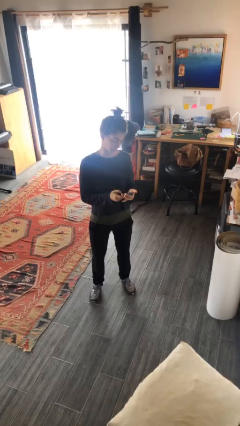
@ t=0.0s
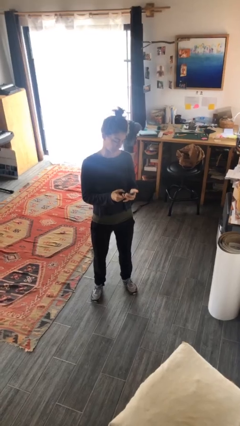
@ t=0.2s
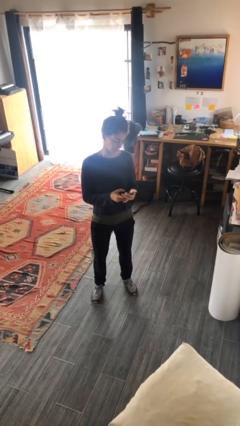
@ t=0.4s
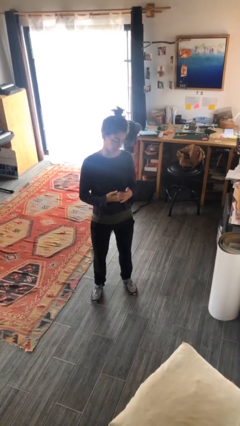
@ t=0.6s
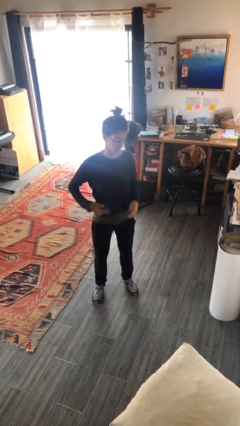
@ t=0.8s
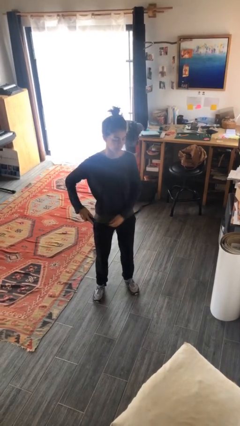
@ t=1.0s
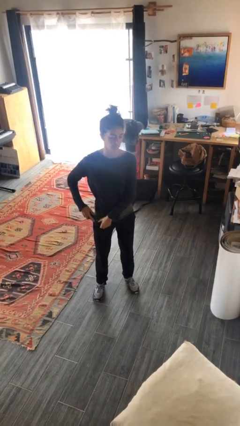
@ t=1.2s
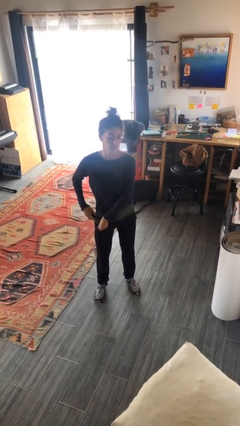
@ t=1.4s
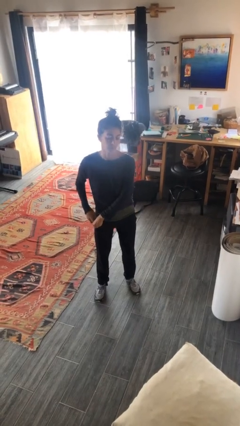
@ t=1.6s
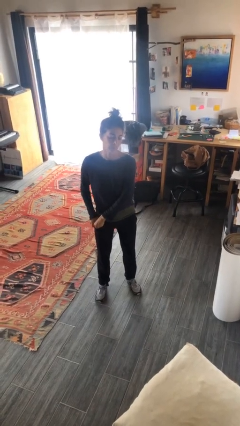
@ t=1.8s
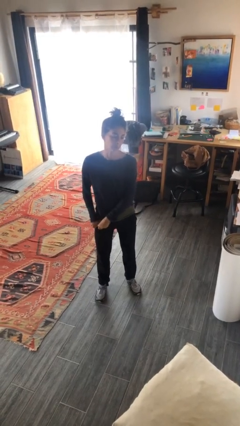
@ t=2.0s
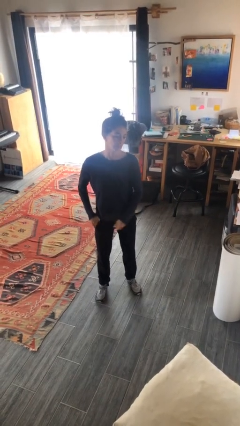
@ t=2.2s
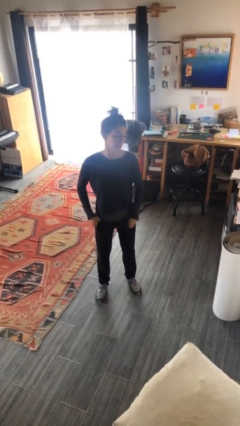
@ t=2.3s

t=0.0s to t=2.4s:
person puts phone into pocket

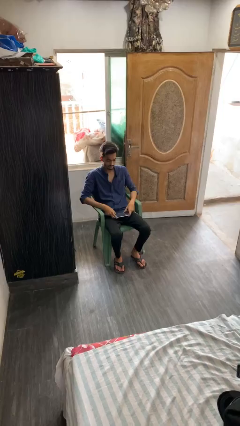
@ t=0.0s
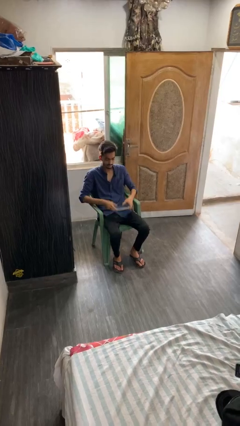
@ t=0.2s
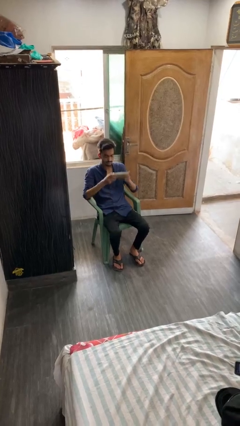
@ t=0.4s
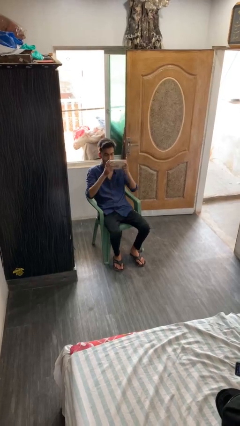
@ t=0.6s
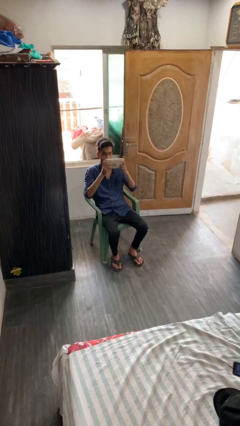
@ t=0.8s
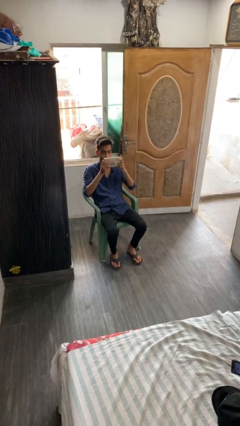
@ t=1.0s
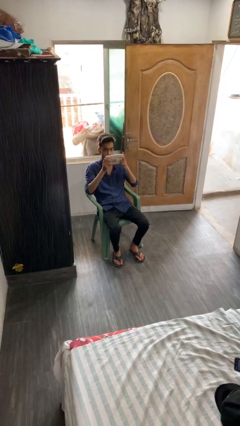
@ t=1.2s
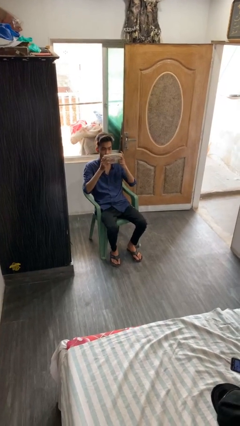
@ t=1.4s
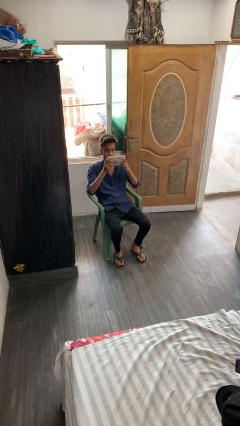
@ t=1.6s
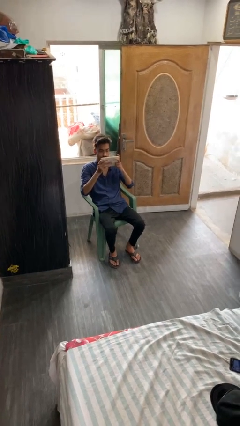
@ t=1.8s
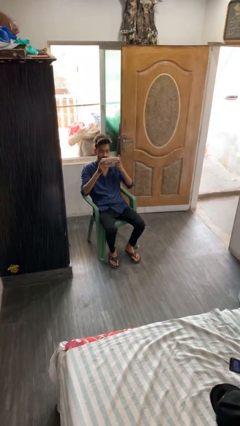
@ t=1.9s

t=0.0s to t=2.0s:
person interacts with tablet

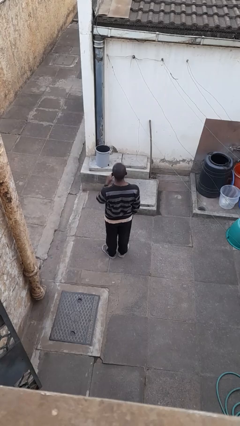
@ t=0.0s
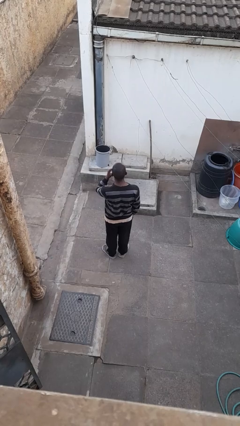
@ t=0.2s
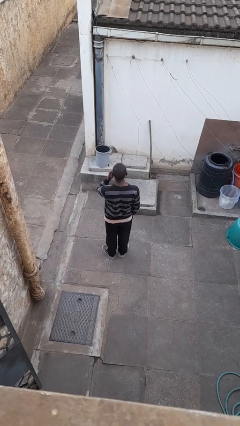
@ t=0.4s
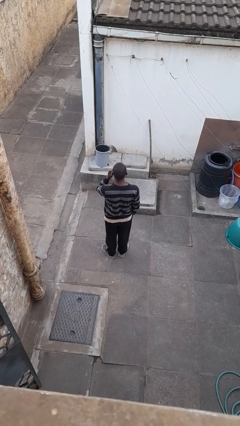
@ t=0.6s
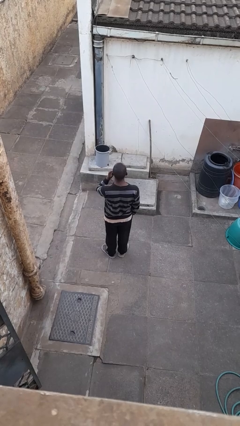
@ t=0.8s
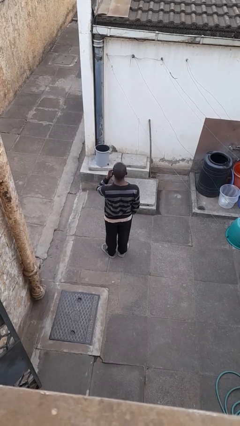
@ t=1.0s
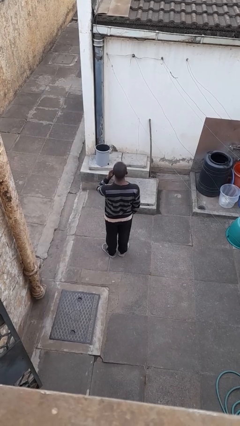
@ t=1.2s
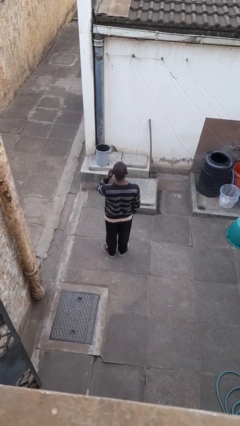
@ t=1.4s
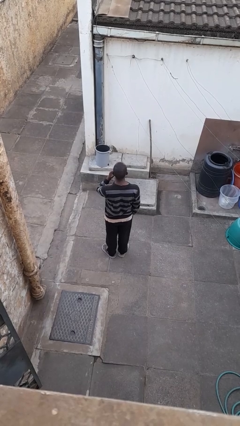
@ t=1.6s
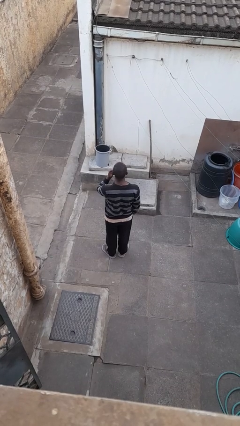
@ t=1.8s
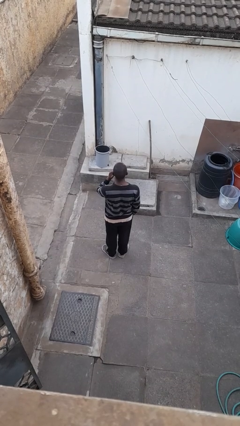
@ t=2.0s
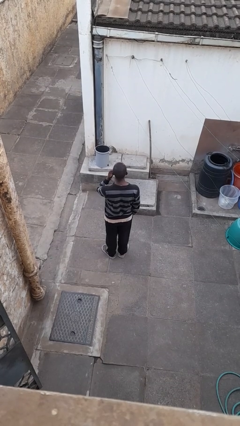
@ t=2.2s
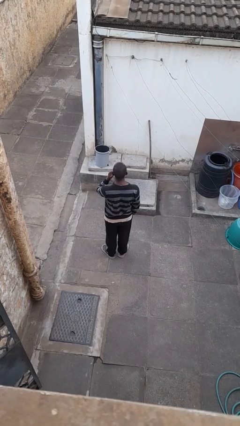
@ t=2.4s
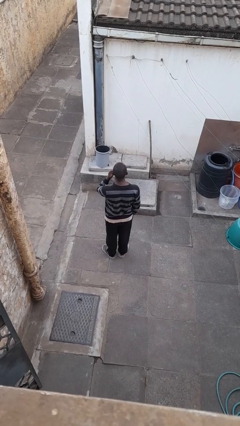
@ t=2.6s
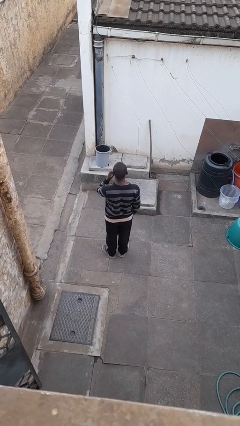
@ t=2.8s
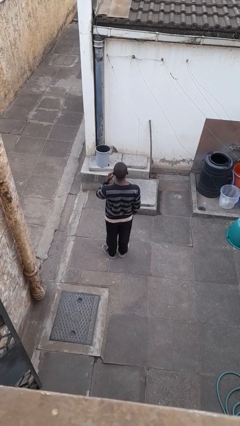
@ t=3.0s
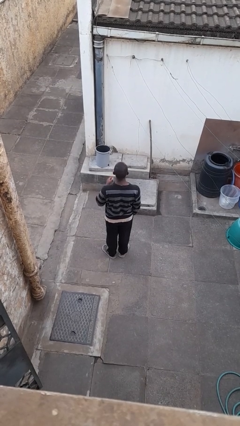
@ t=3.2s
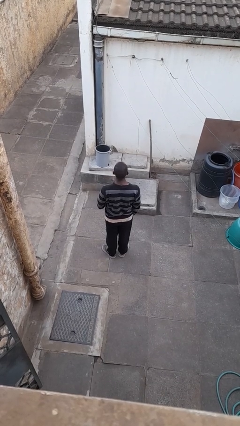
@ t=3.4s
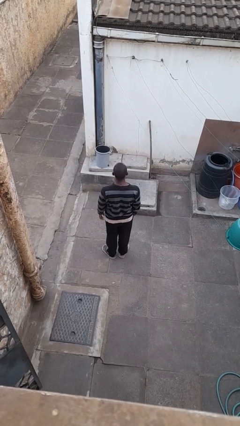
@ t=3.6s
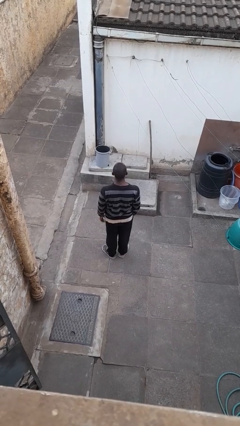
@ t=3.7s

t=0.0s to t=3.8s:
person scratches face

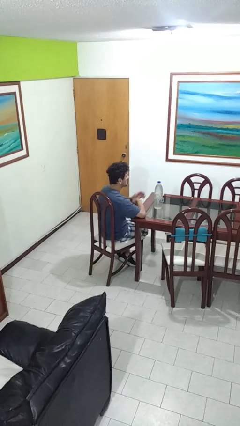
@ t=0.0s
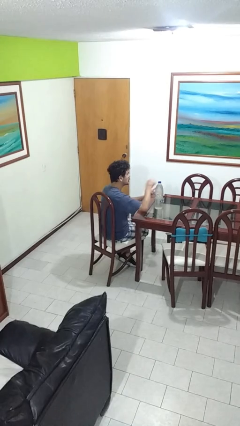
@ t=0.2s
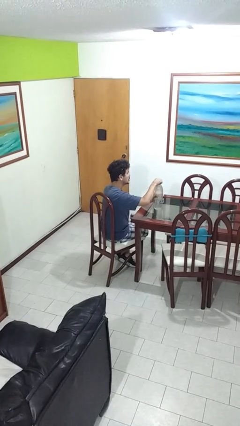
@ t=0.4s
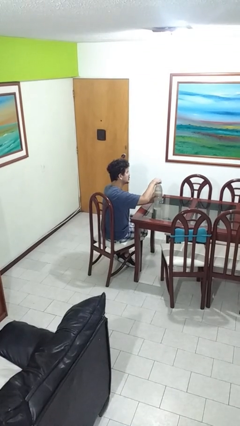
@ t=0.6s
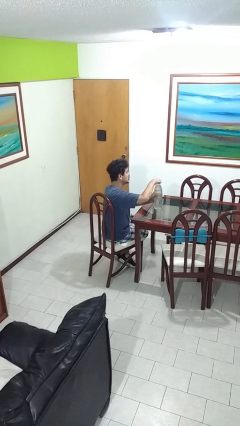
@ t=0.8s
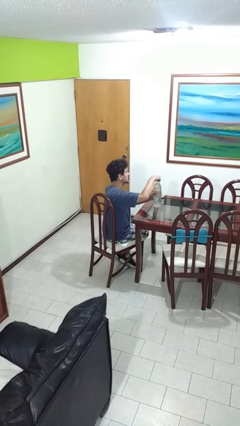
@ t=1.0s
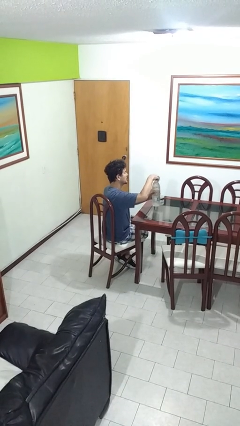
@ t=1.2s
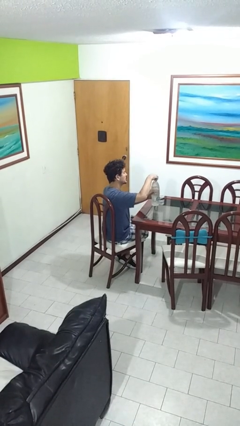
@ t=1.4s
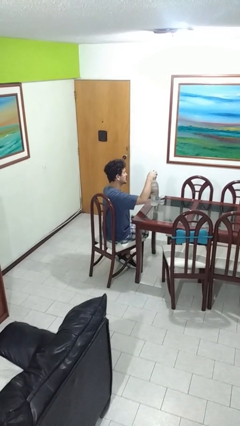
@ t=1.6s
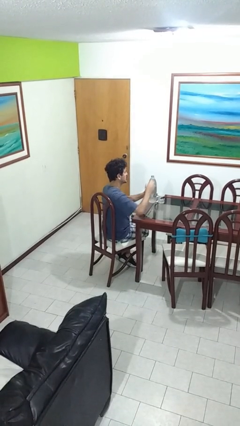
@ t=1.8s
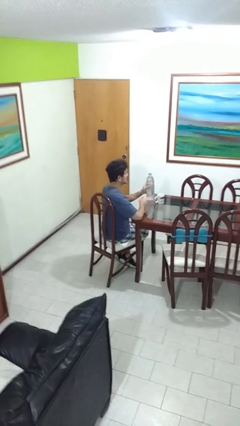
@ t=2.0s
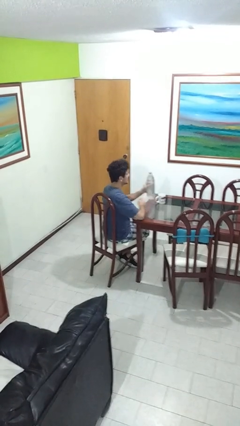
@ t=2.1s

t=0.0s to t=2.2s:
person unscrews lid from bottle

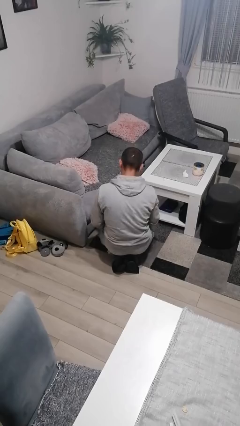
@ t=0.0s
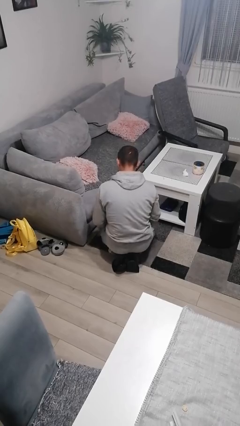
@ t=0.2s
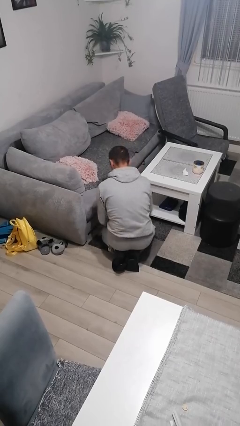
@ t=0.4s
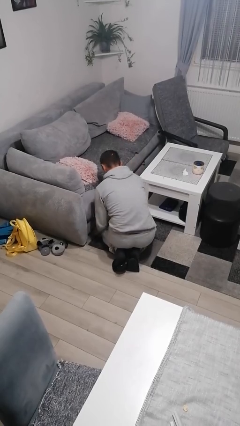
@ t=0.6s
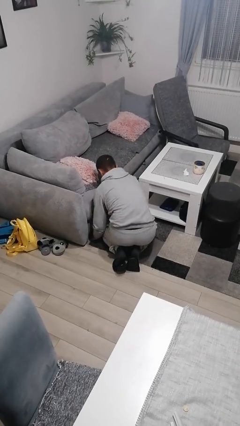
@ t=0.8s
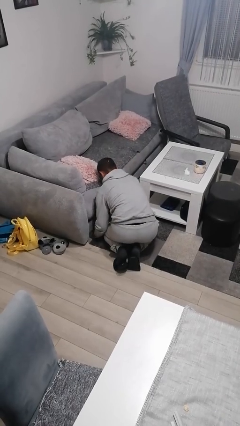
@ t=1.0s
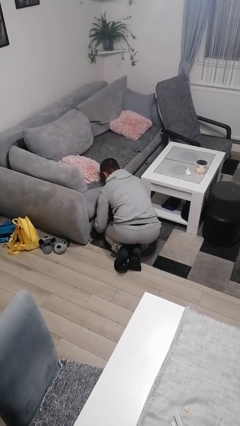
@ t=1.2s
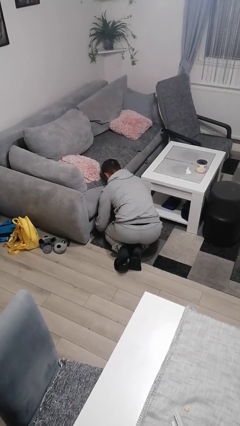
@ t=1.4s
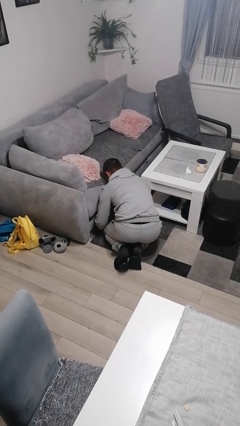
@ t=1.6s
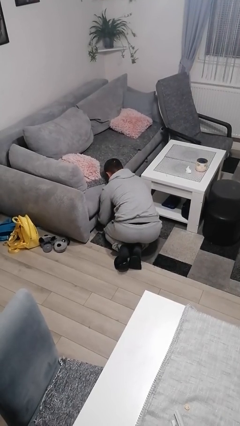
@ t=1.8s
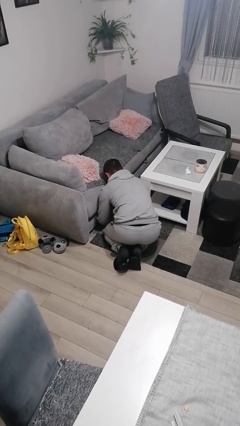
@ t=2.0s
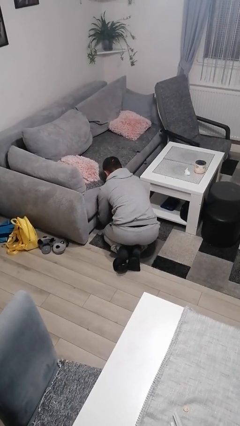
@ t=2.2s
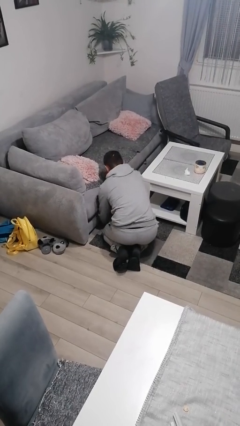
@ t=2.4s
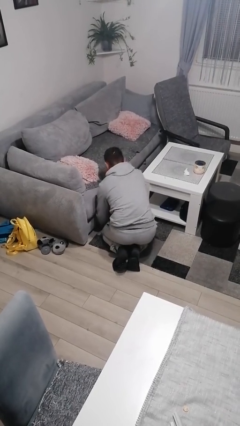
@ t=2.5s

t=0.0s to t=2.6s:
person searches under couch

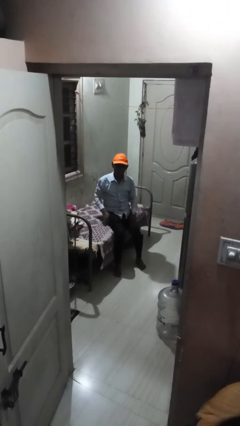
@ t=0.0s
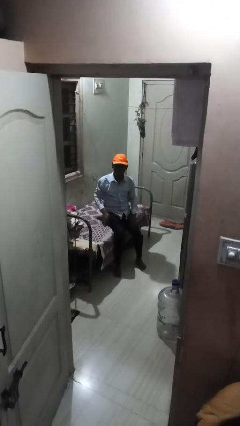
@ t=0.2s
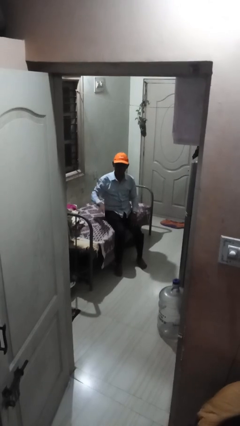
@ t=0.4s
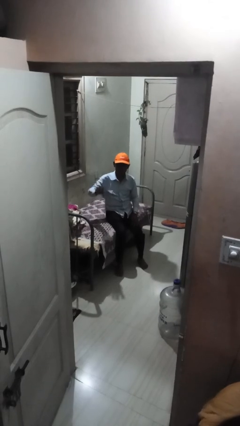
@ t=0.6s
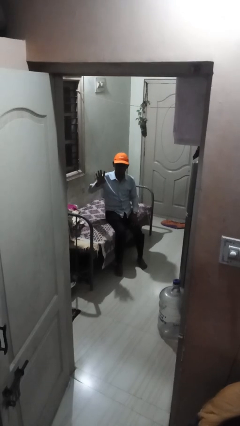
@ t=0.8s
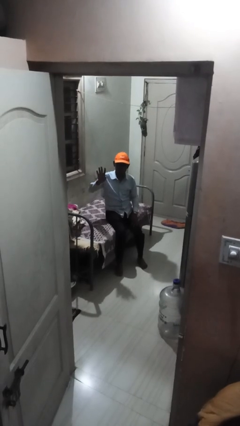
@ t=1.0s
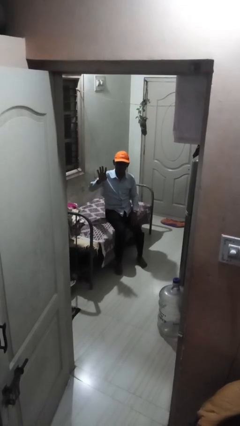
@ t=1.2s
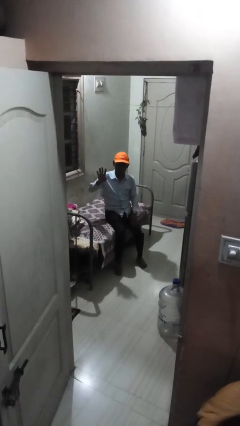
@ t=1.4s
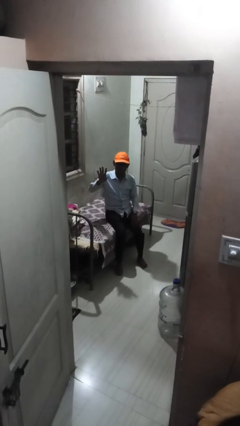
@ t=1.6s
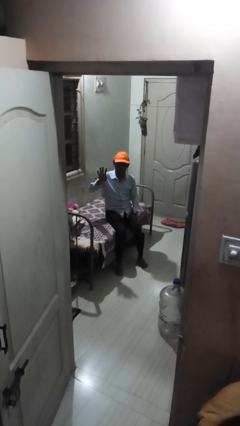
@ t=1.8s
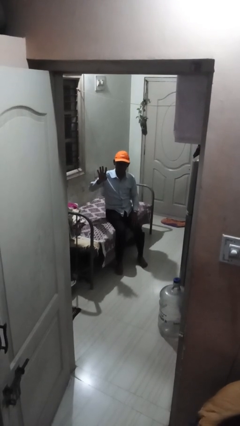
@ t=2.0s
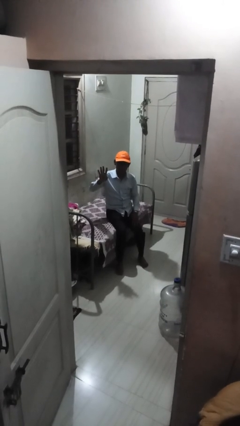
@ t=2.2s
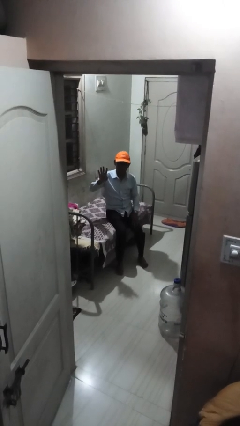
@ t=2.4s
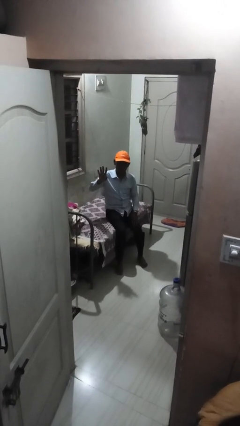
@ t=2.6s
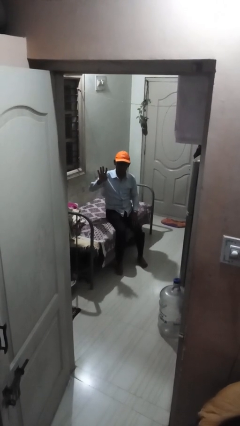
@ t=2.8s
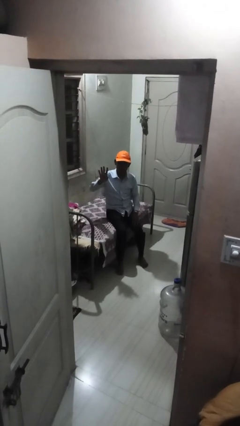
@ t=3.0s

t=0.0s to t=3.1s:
person gestures number four

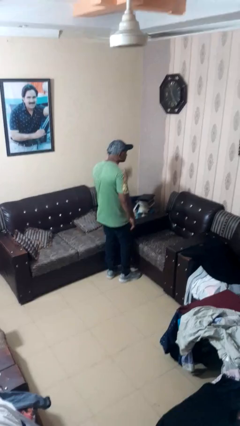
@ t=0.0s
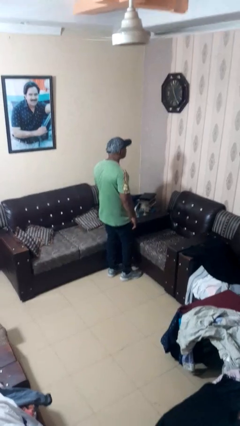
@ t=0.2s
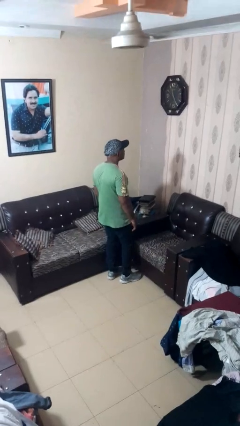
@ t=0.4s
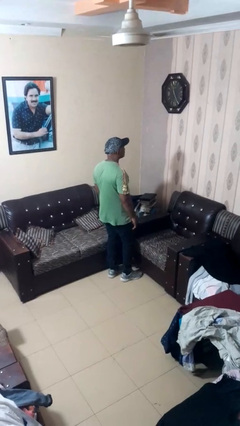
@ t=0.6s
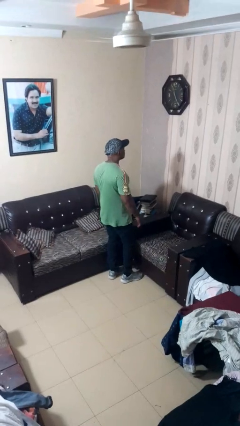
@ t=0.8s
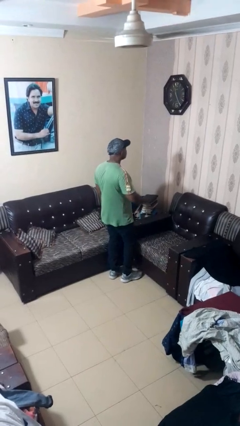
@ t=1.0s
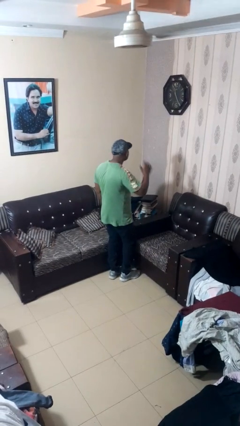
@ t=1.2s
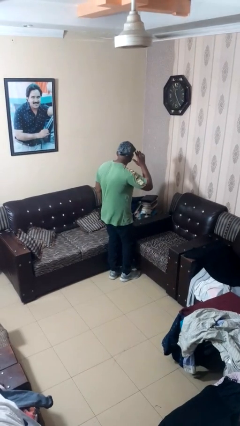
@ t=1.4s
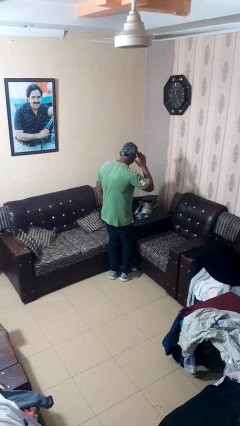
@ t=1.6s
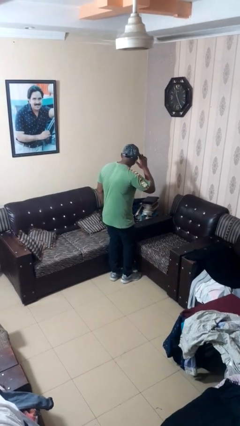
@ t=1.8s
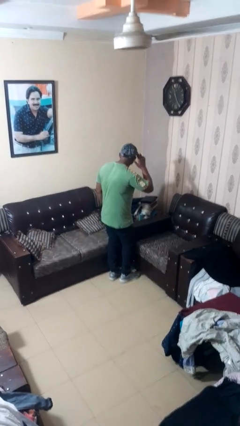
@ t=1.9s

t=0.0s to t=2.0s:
person gestures listen closely
